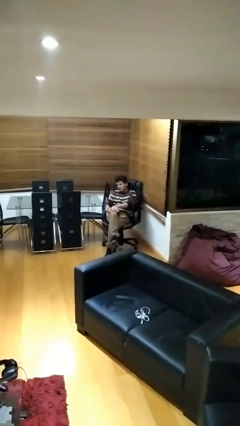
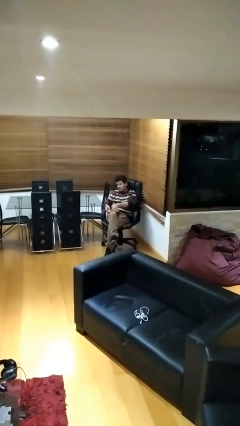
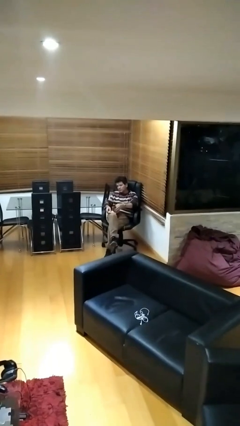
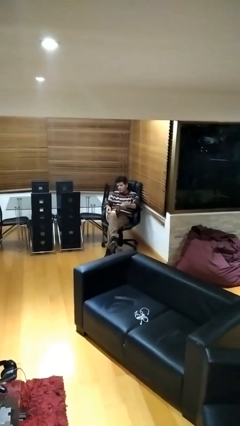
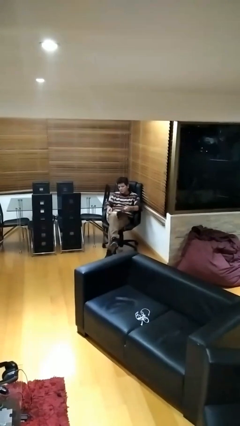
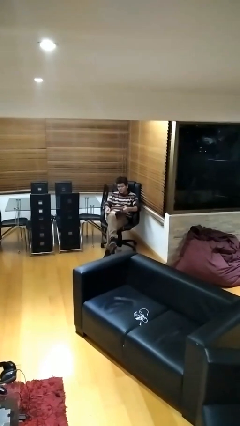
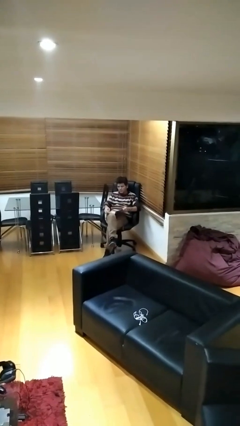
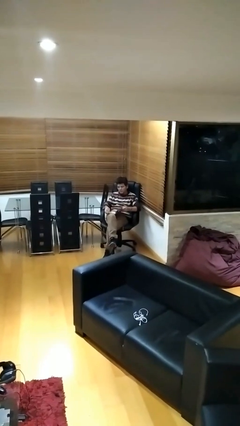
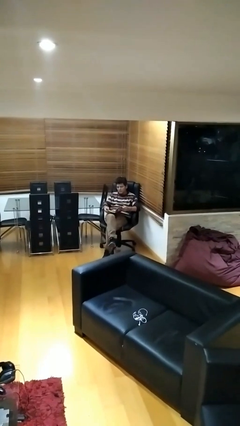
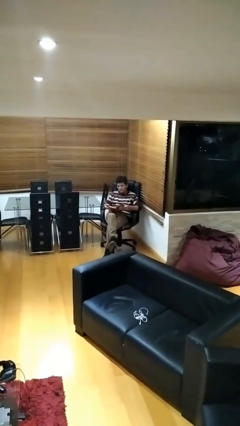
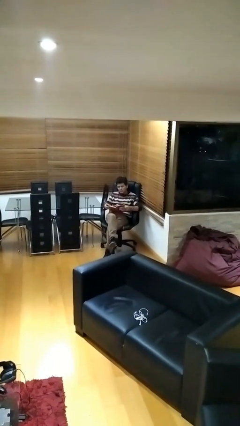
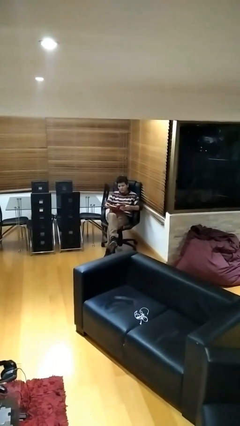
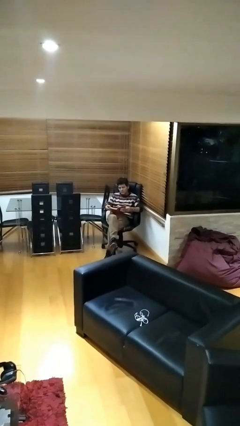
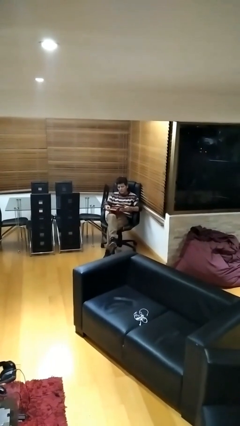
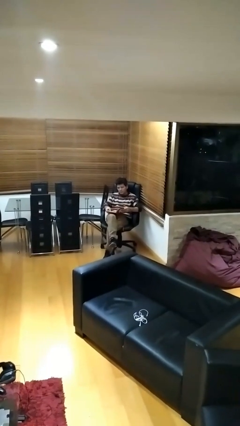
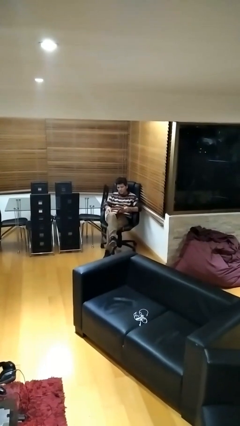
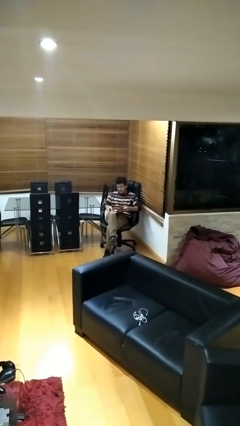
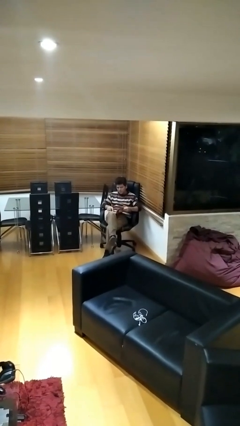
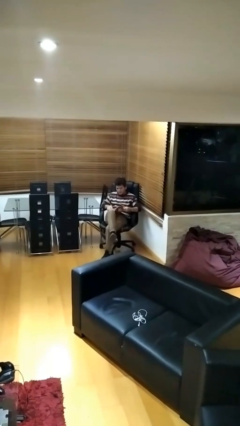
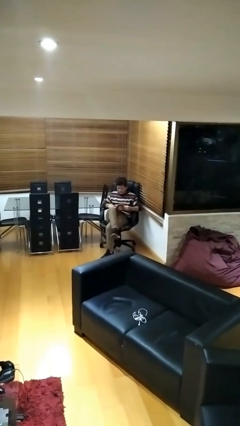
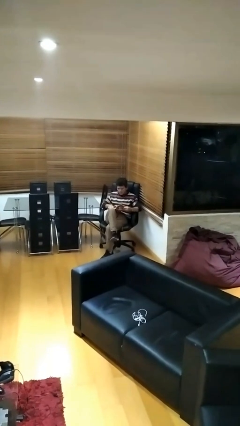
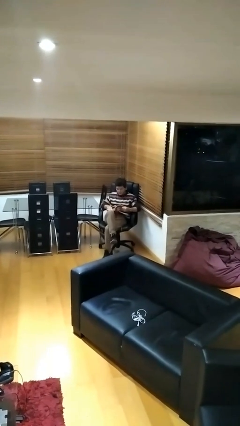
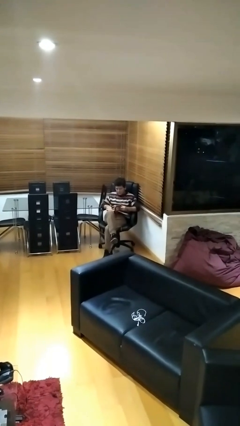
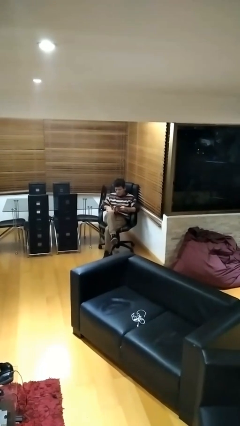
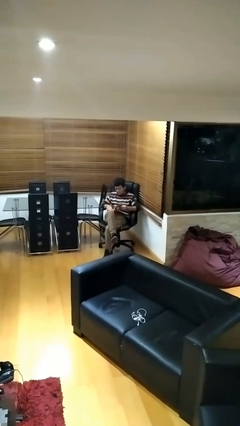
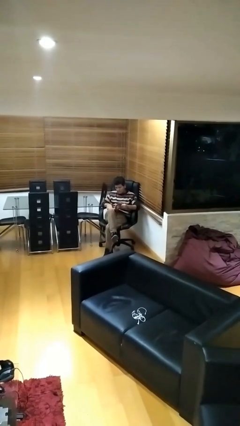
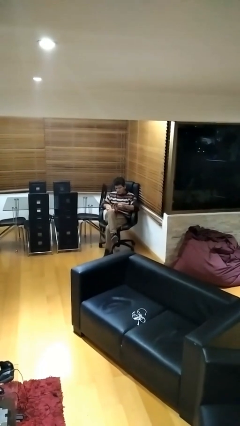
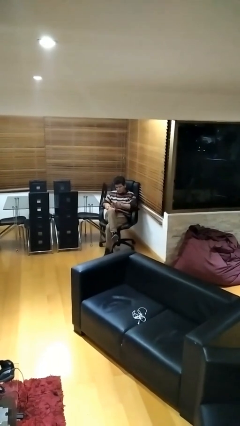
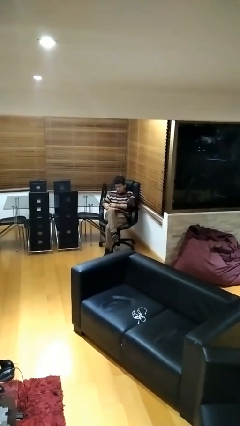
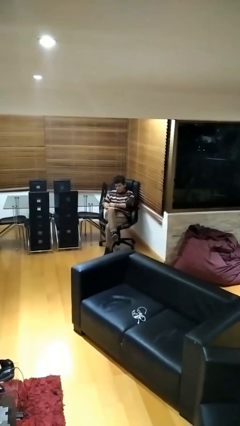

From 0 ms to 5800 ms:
person reads document

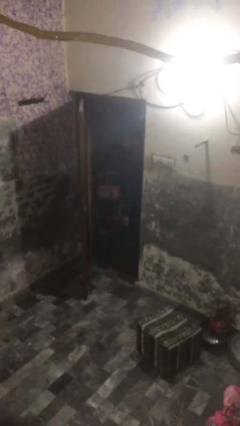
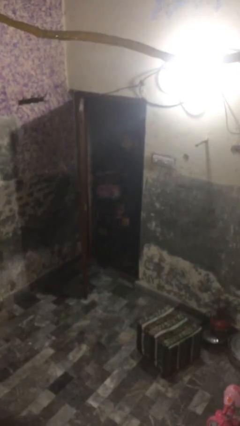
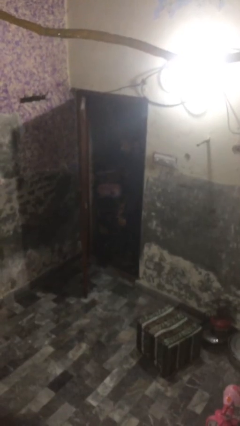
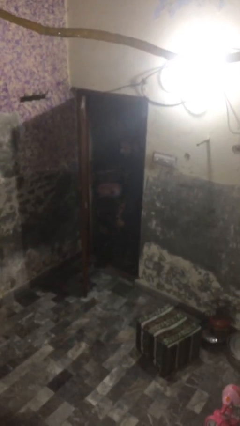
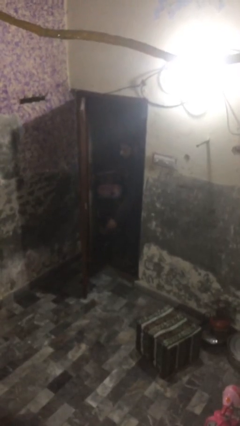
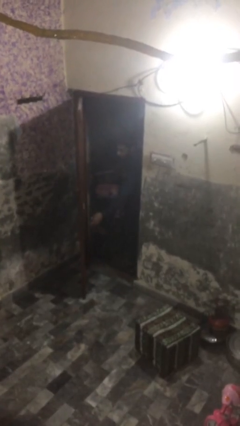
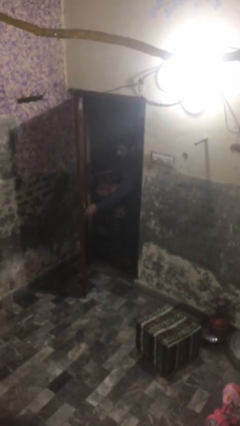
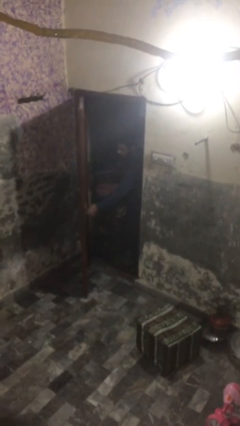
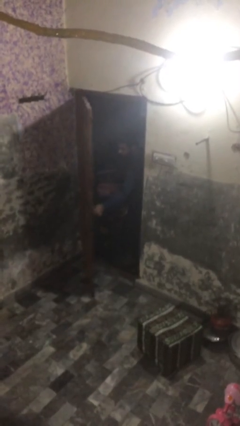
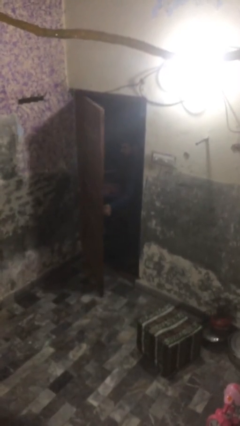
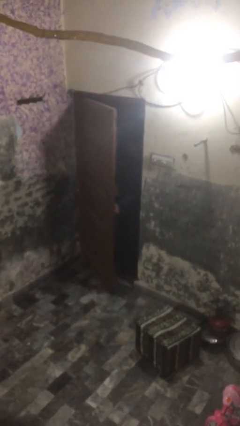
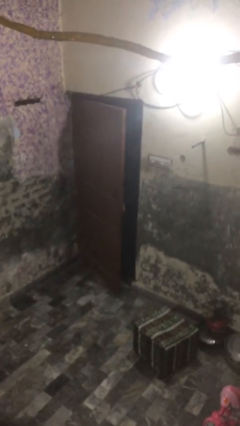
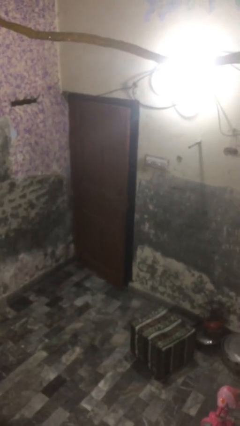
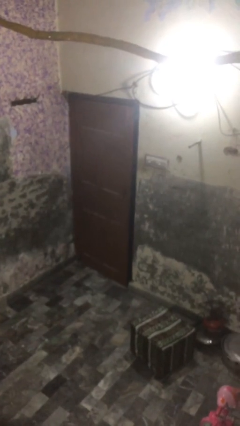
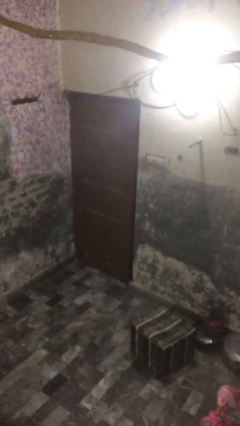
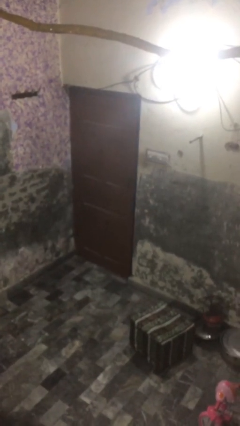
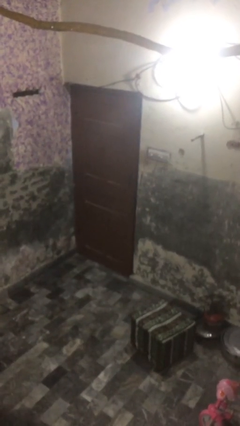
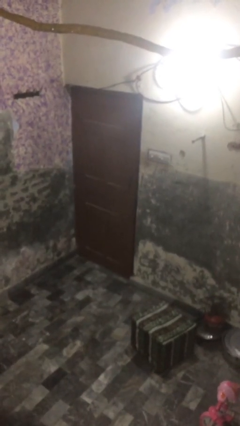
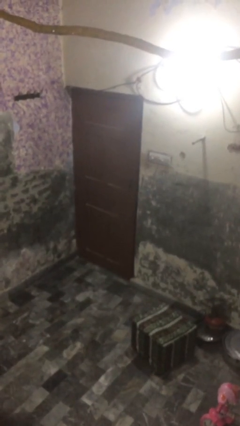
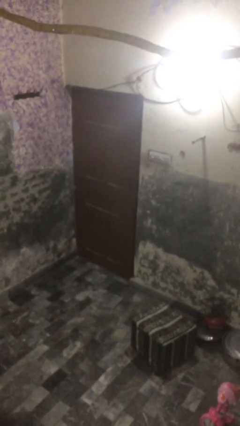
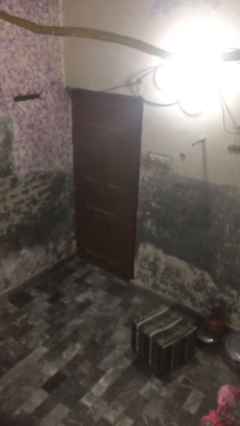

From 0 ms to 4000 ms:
person closes facility door

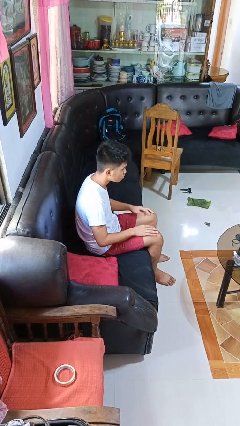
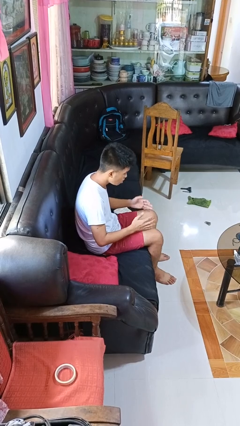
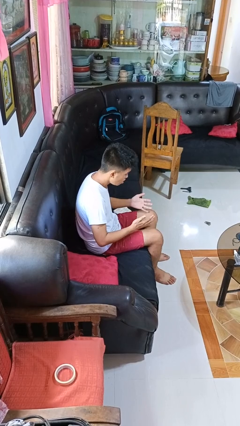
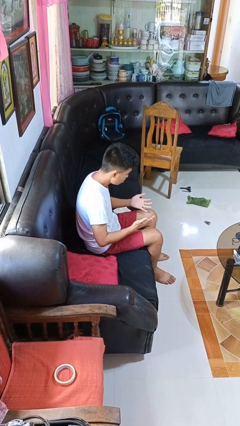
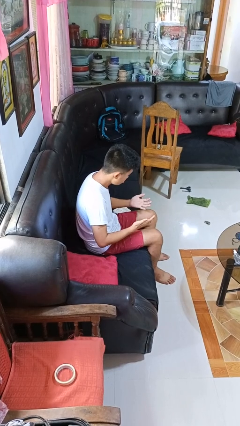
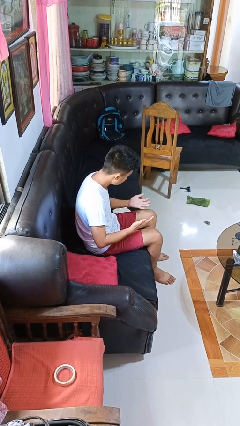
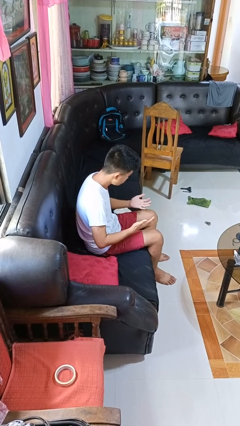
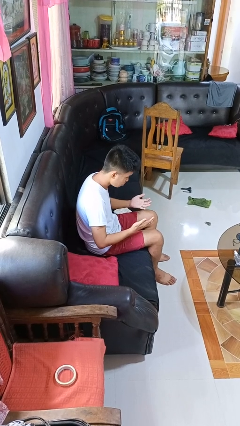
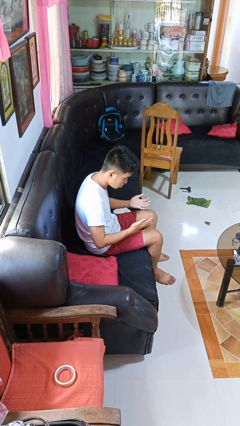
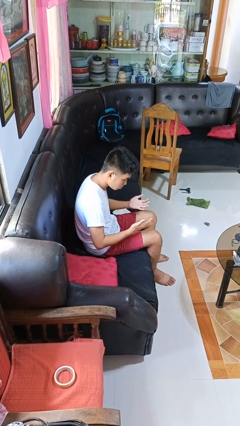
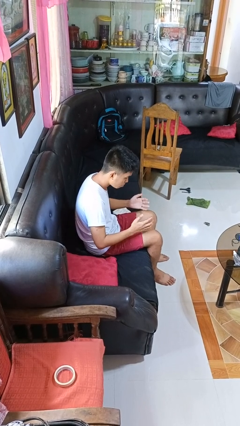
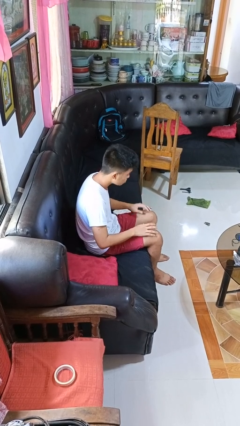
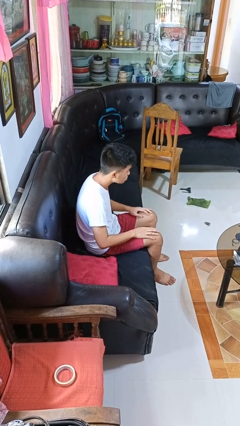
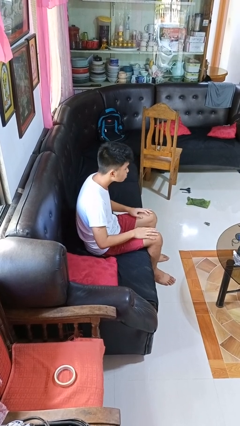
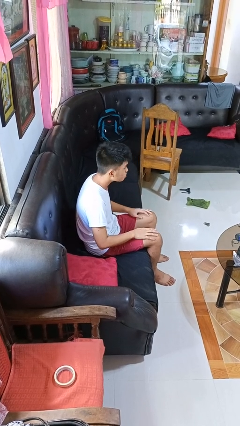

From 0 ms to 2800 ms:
person looks at hands in lap

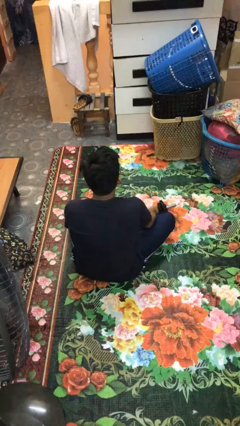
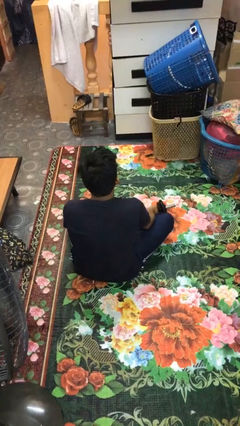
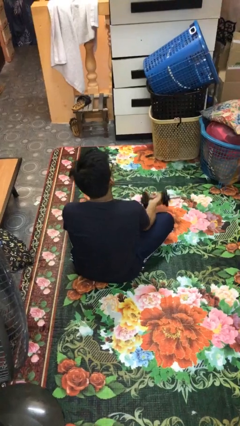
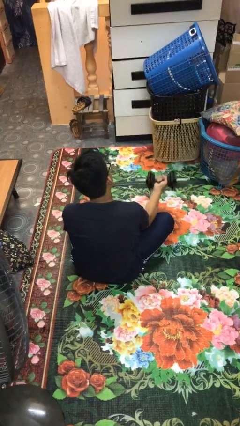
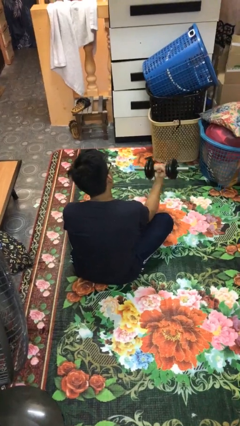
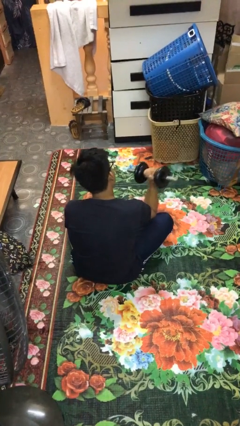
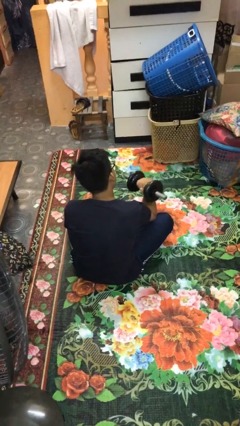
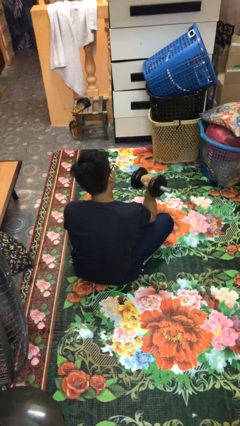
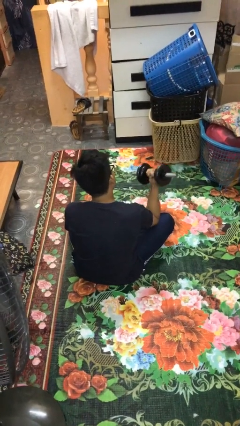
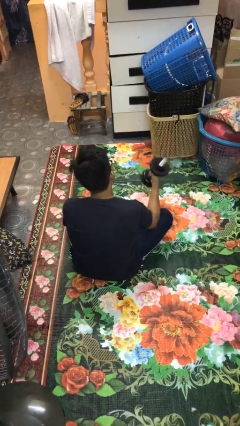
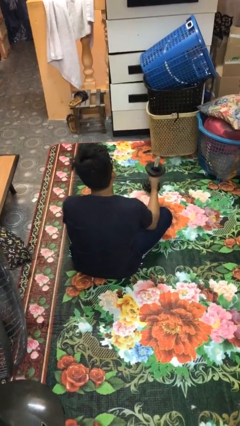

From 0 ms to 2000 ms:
person lifts dumbbells

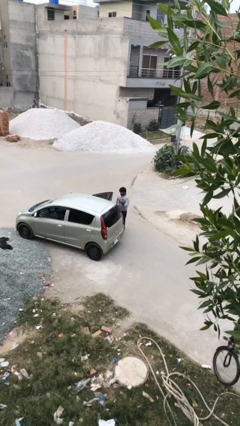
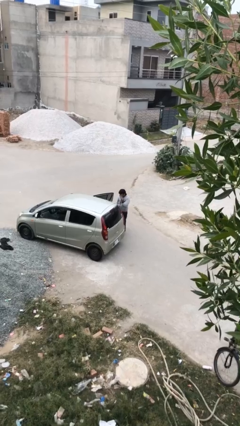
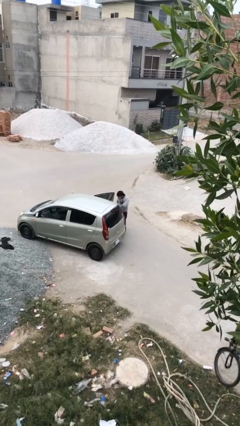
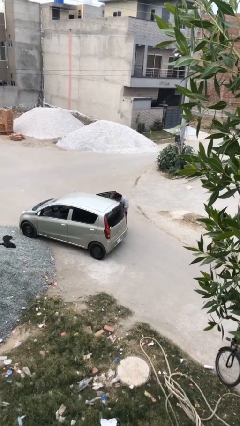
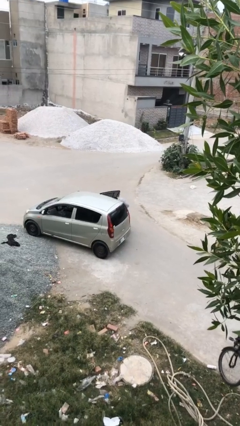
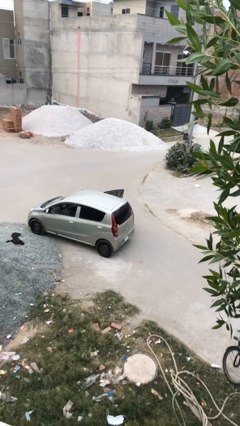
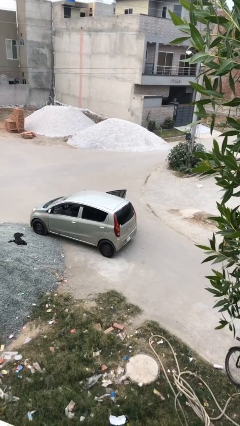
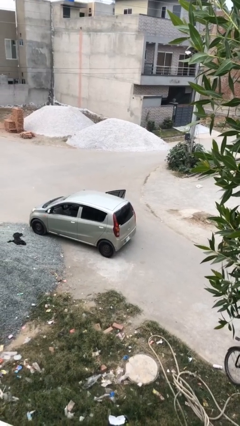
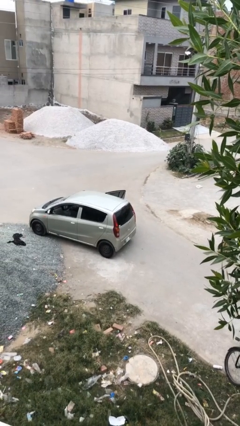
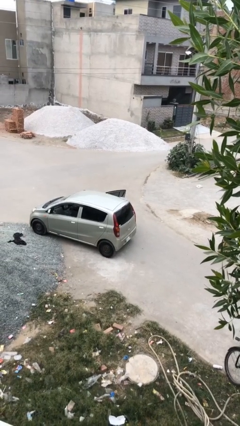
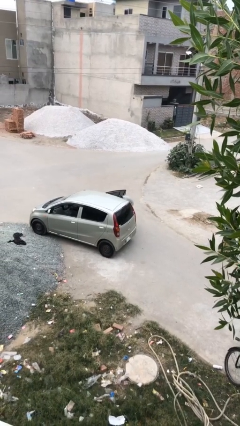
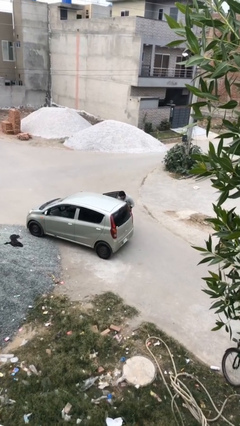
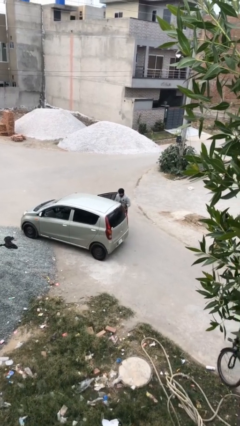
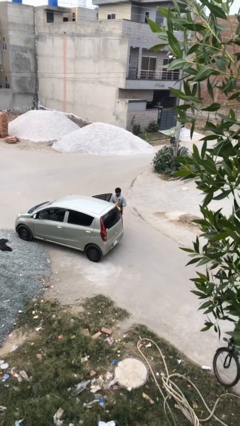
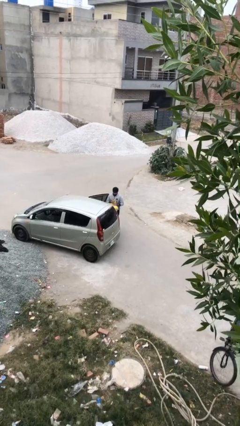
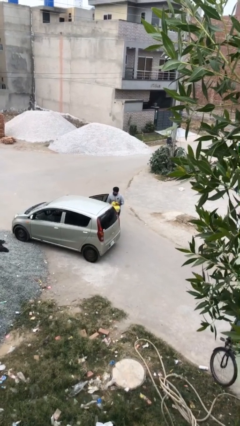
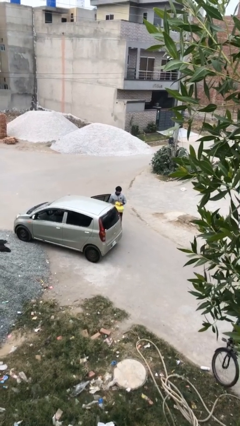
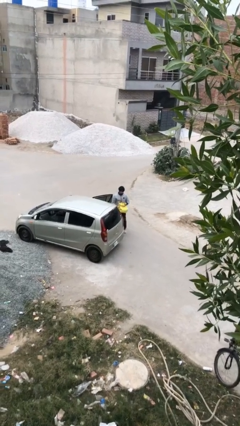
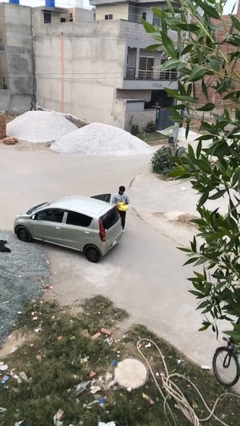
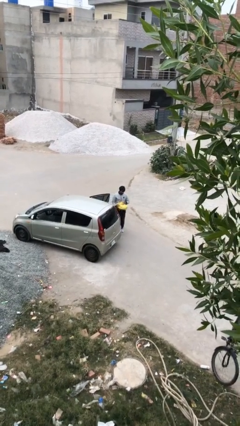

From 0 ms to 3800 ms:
person unloads car
